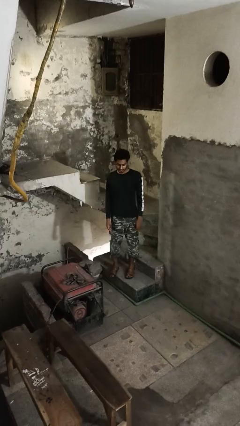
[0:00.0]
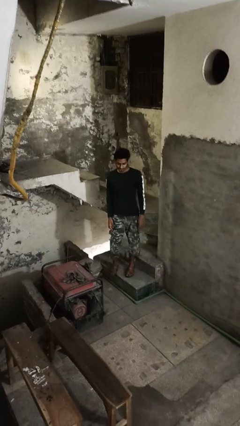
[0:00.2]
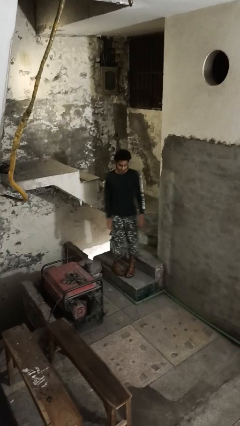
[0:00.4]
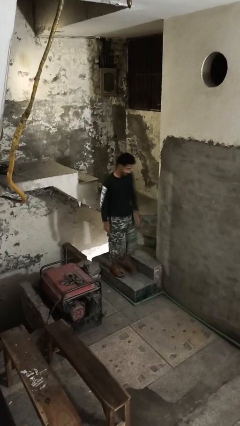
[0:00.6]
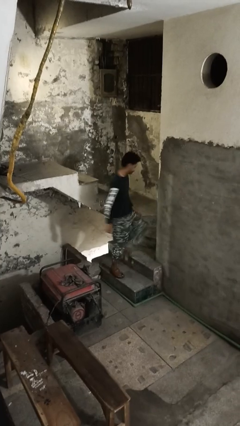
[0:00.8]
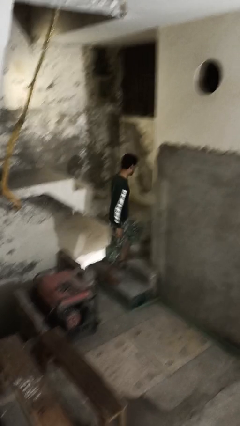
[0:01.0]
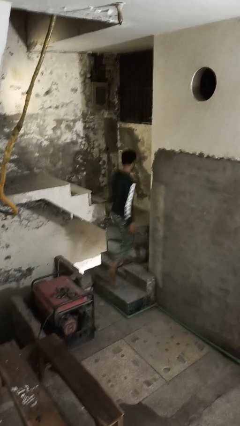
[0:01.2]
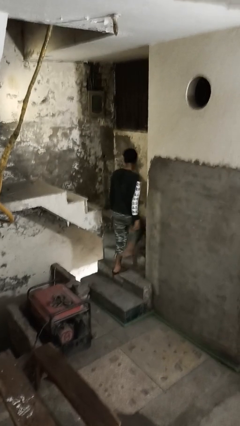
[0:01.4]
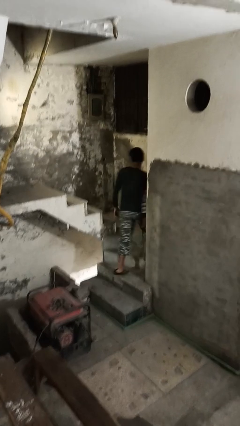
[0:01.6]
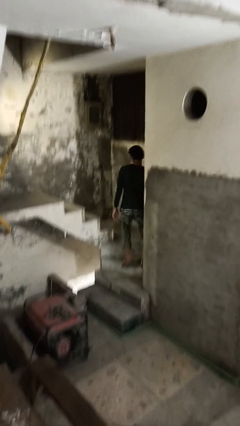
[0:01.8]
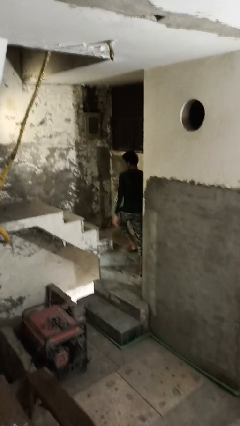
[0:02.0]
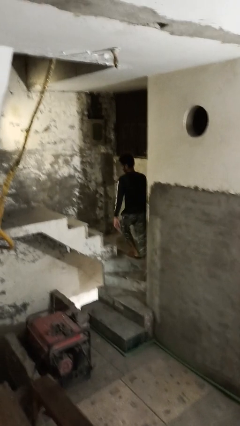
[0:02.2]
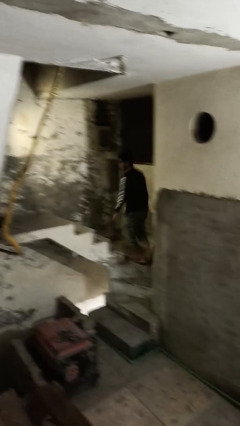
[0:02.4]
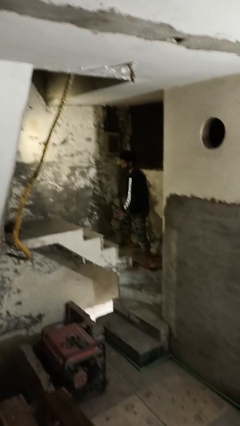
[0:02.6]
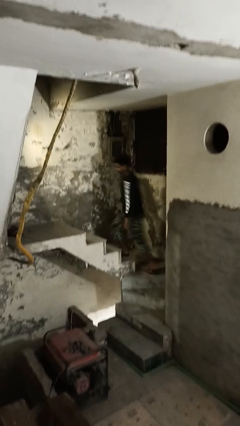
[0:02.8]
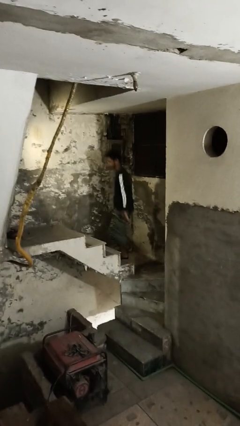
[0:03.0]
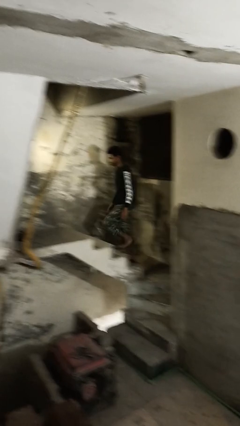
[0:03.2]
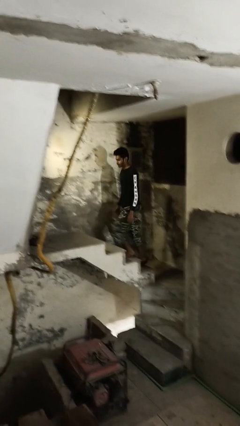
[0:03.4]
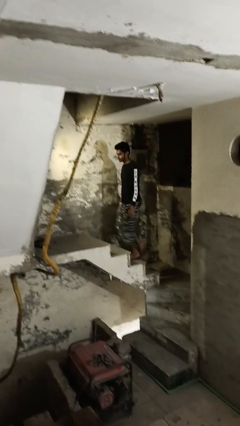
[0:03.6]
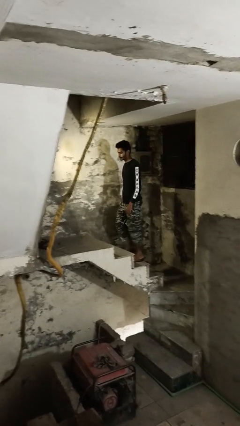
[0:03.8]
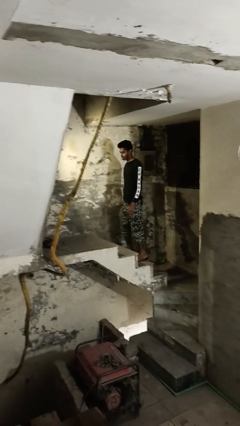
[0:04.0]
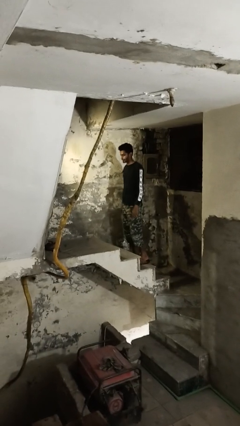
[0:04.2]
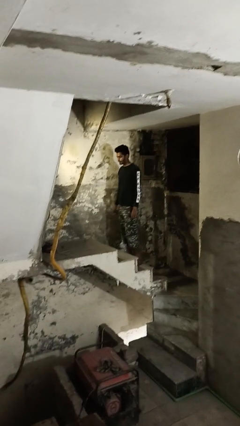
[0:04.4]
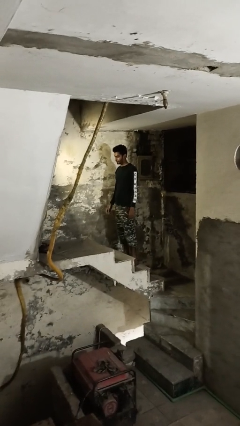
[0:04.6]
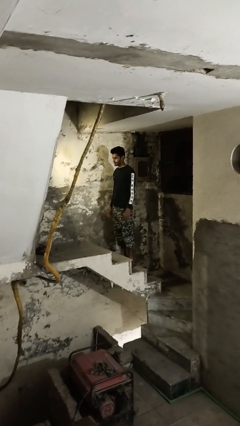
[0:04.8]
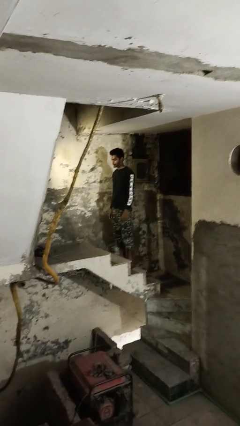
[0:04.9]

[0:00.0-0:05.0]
person climbs up stairs

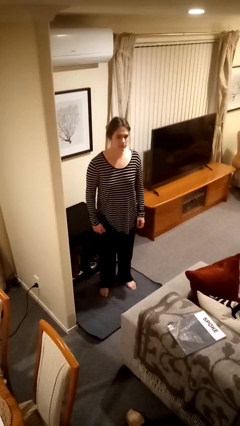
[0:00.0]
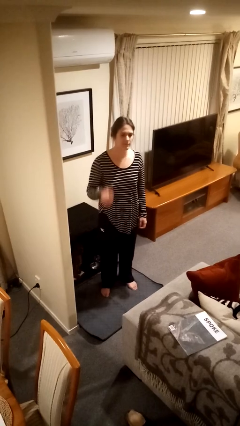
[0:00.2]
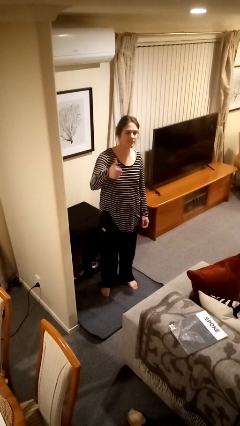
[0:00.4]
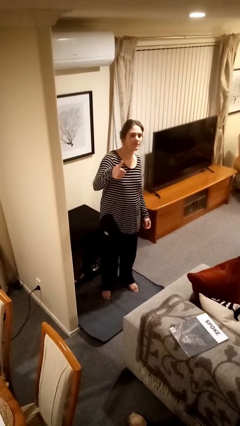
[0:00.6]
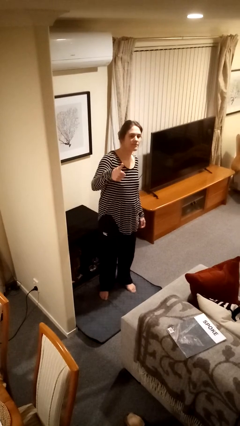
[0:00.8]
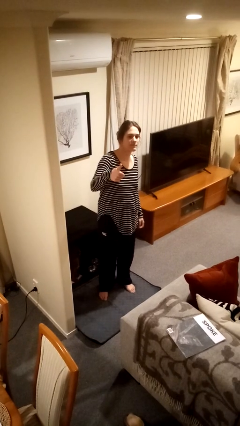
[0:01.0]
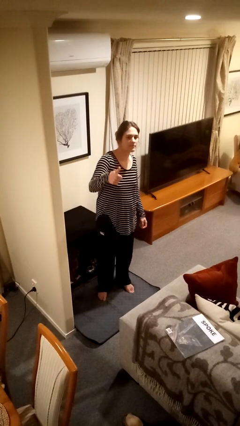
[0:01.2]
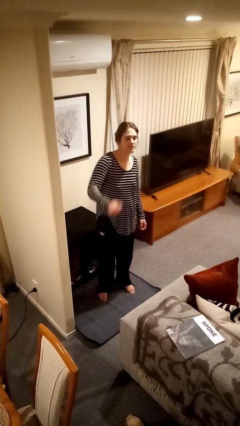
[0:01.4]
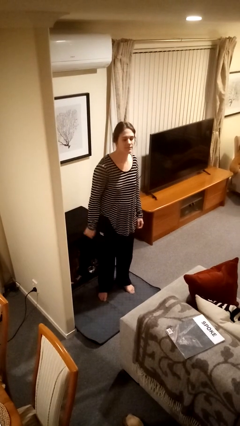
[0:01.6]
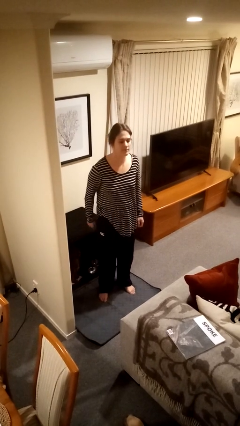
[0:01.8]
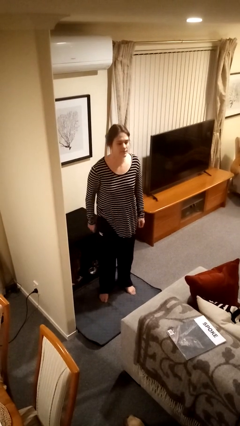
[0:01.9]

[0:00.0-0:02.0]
person gestures thumbs up

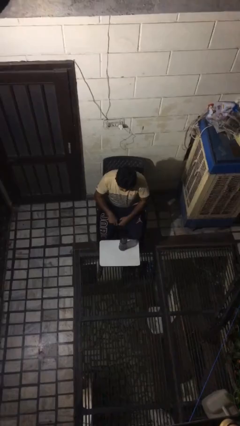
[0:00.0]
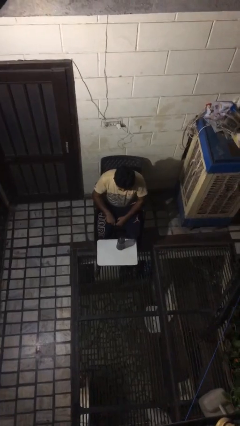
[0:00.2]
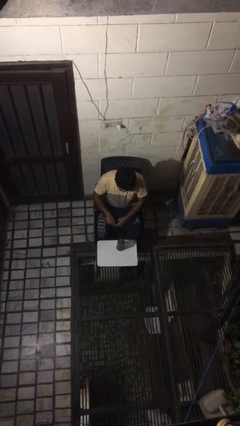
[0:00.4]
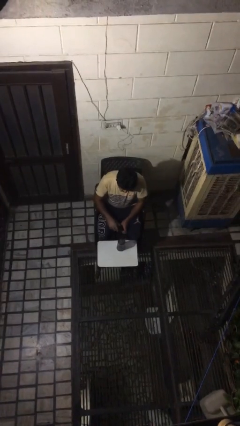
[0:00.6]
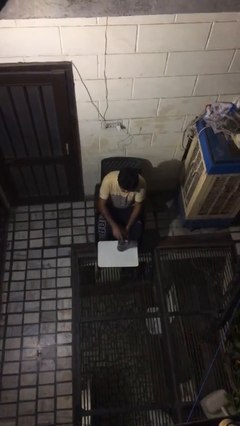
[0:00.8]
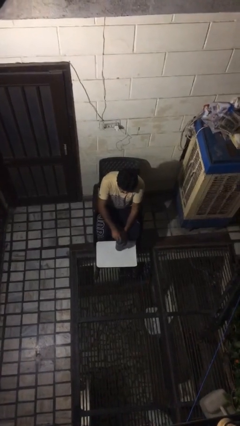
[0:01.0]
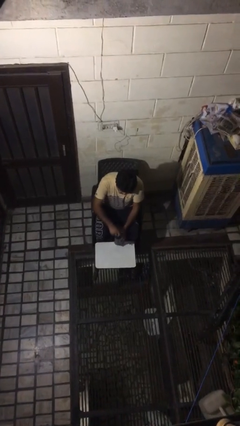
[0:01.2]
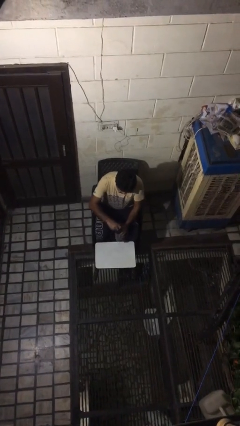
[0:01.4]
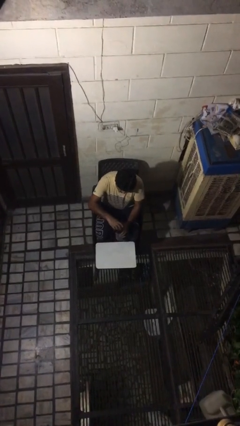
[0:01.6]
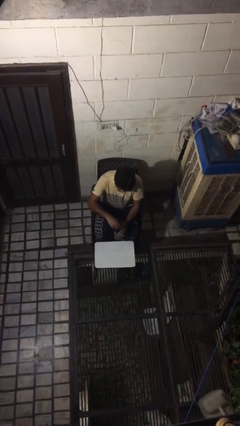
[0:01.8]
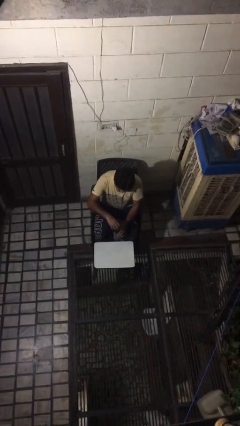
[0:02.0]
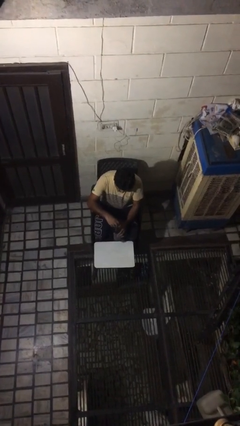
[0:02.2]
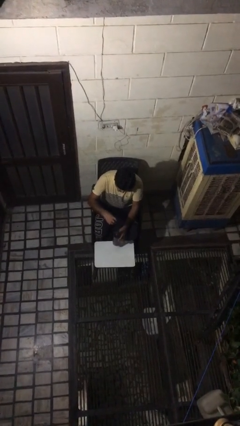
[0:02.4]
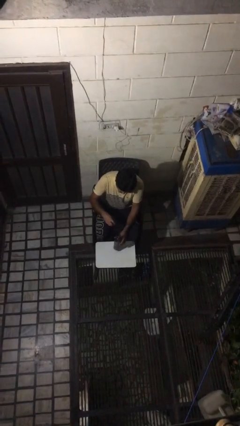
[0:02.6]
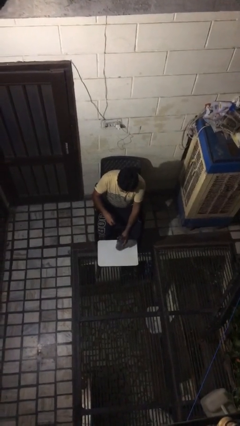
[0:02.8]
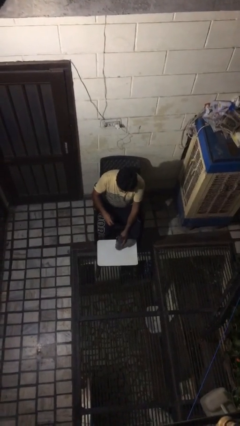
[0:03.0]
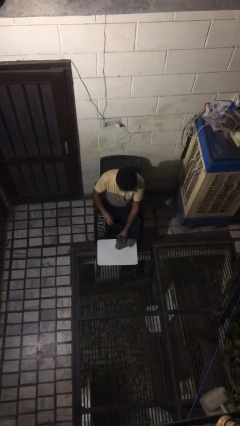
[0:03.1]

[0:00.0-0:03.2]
person unscrews lid from bottle

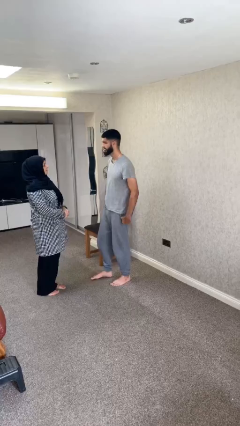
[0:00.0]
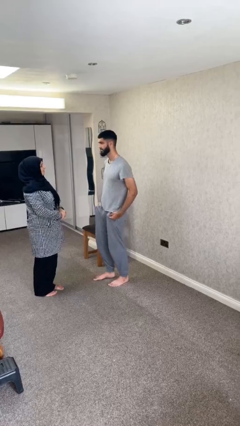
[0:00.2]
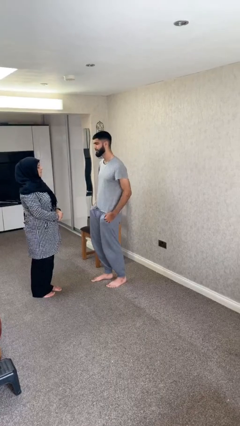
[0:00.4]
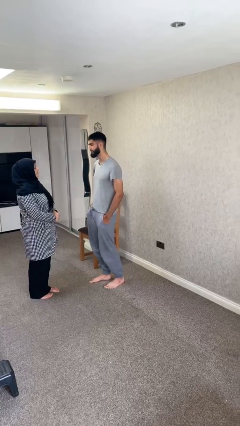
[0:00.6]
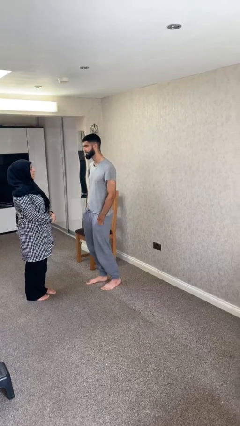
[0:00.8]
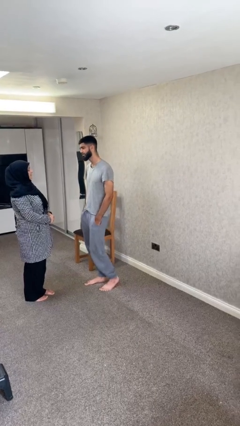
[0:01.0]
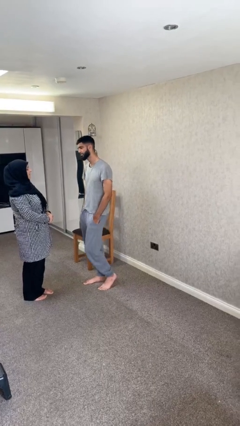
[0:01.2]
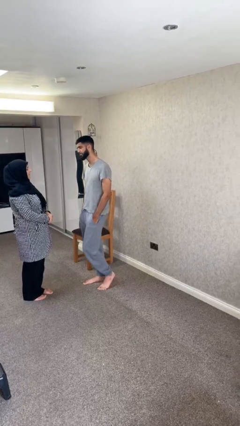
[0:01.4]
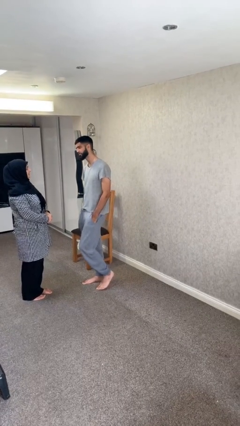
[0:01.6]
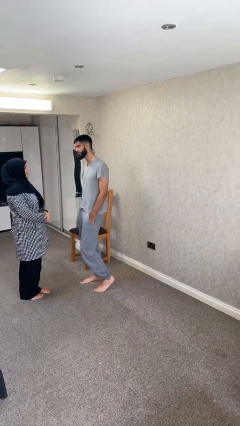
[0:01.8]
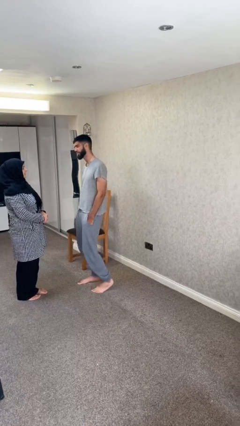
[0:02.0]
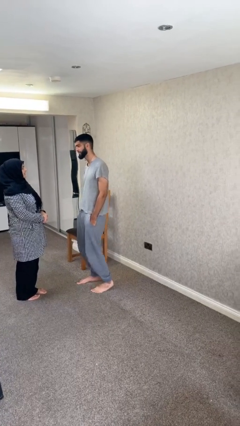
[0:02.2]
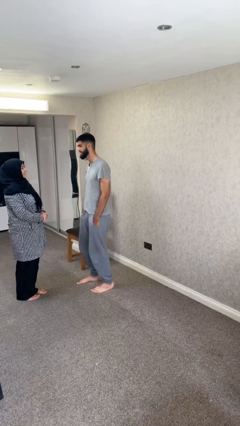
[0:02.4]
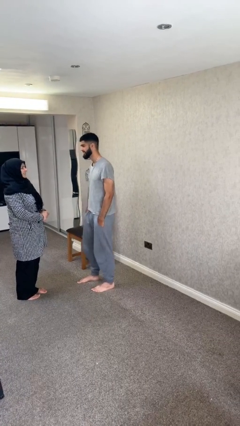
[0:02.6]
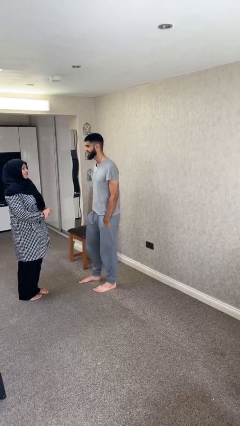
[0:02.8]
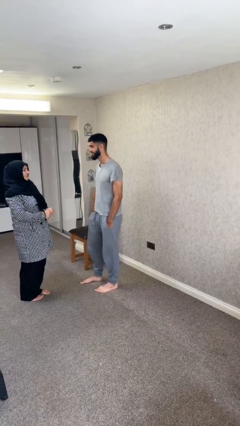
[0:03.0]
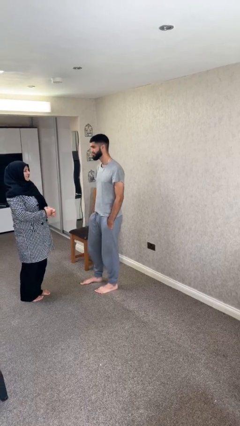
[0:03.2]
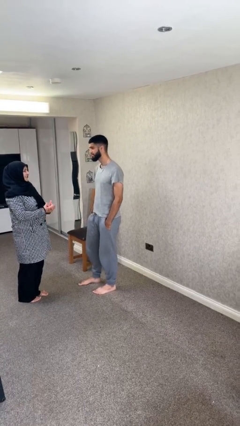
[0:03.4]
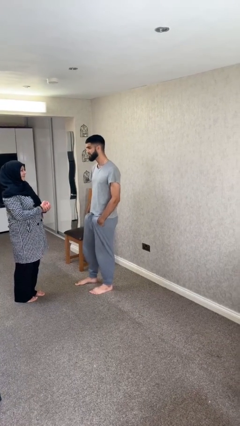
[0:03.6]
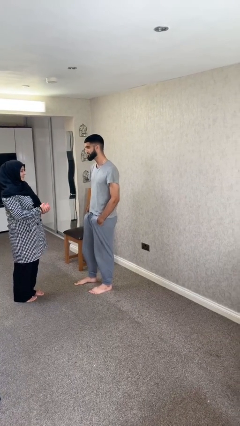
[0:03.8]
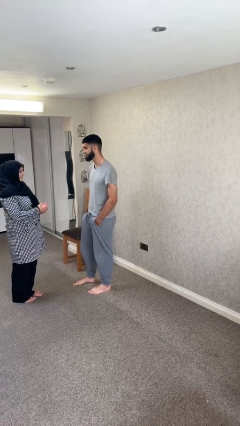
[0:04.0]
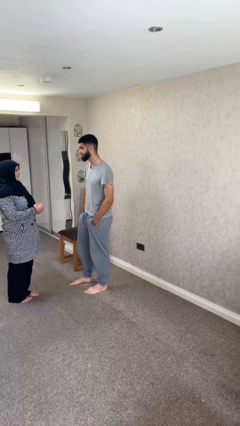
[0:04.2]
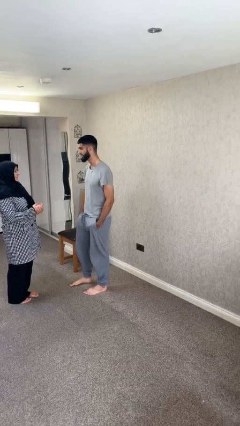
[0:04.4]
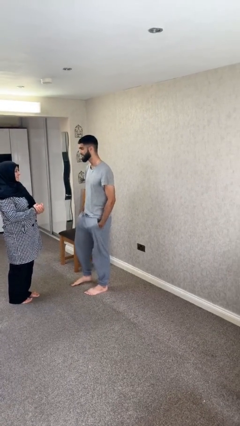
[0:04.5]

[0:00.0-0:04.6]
person talks to person

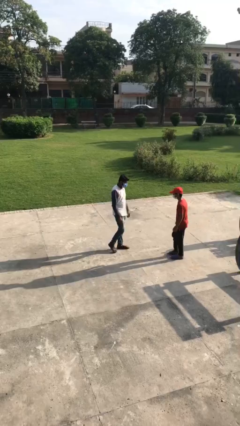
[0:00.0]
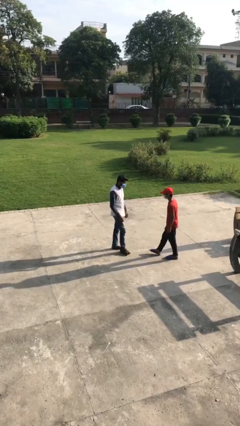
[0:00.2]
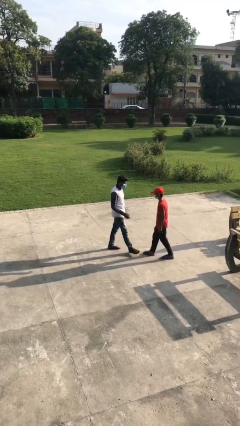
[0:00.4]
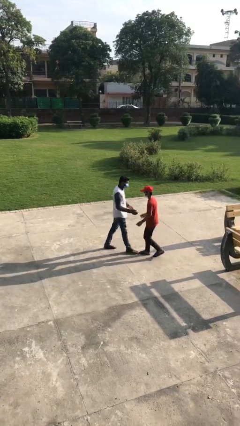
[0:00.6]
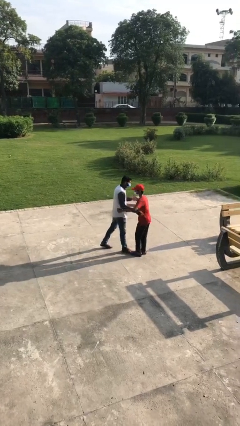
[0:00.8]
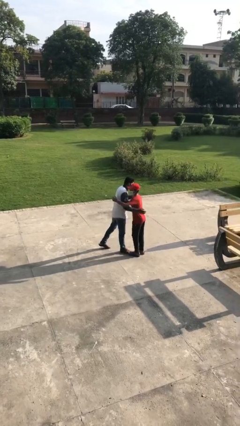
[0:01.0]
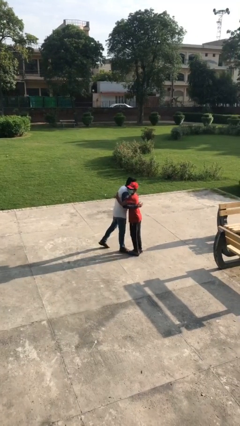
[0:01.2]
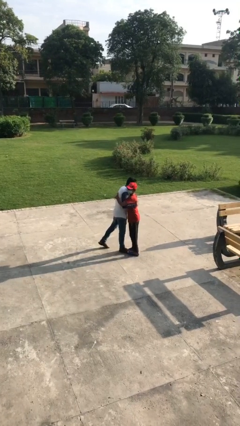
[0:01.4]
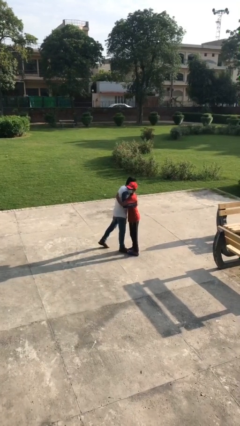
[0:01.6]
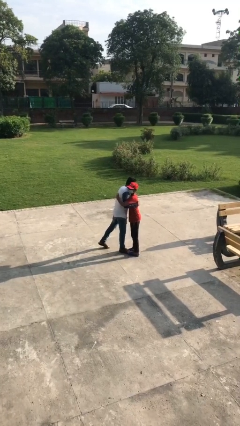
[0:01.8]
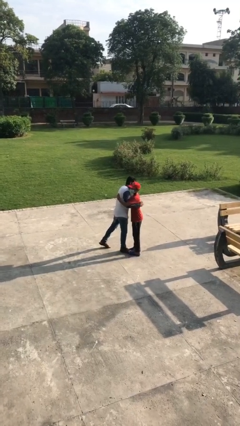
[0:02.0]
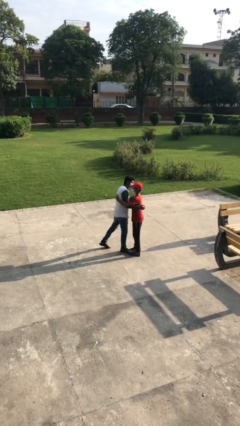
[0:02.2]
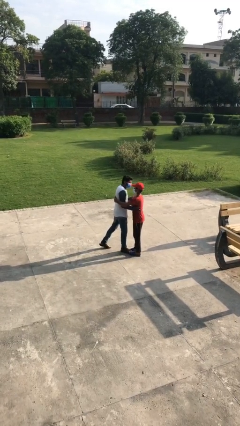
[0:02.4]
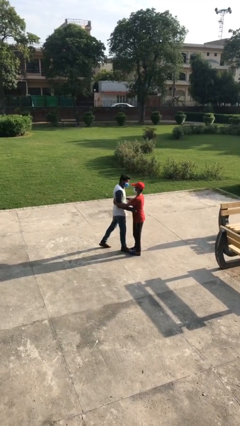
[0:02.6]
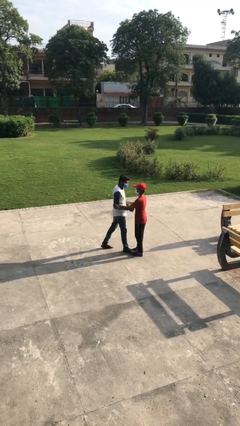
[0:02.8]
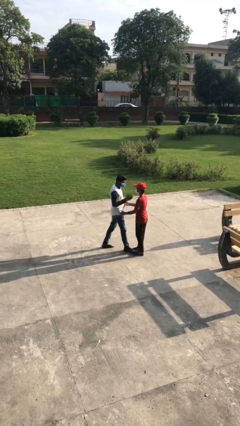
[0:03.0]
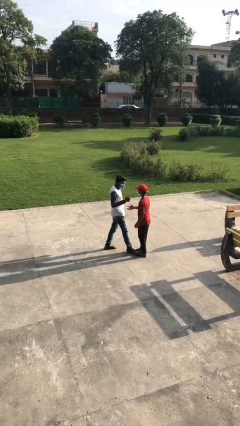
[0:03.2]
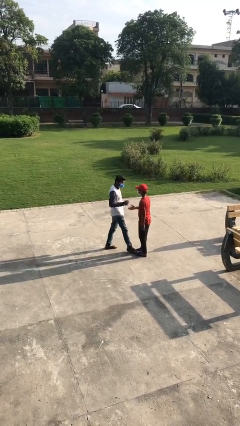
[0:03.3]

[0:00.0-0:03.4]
person embraces person
